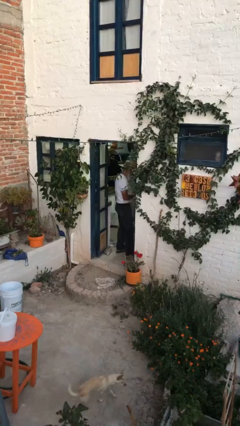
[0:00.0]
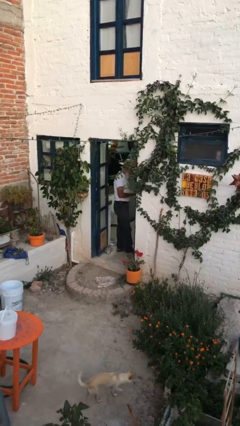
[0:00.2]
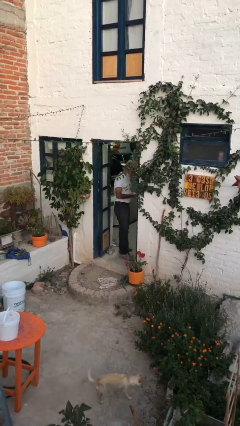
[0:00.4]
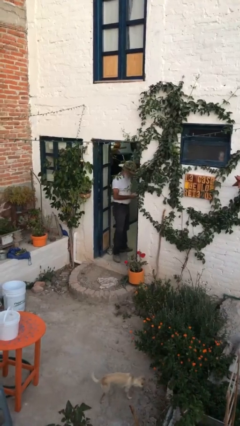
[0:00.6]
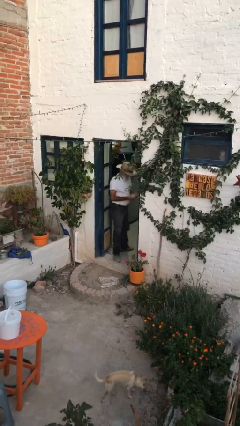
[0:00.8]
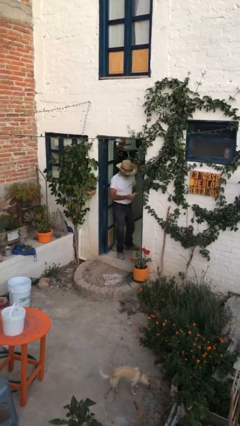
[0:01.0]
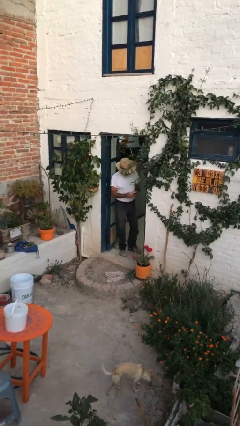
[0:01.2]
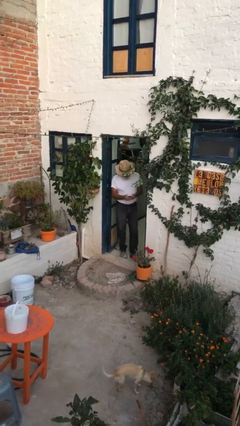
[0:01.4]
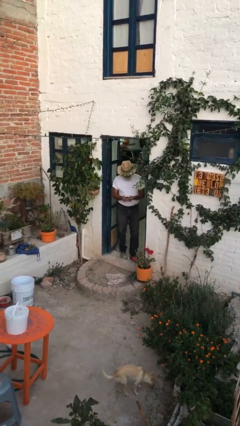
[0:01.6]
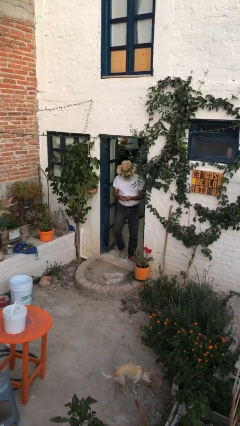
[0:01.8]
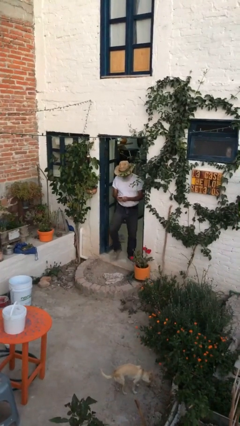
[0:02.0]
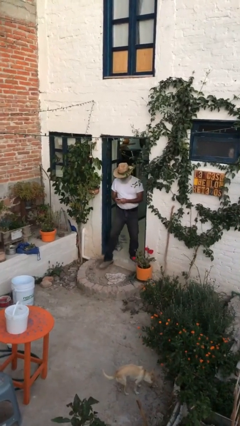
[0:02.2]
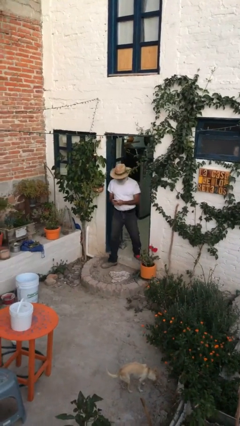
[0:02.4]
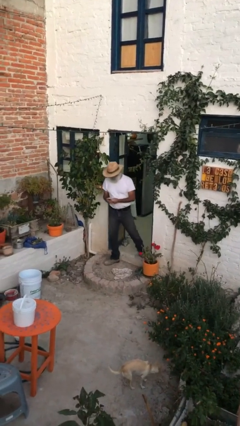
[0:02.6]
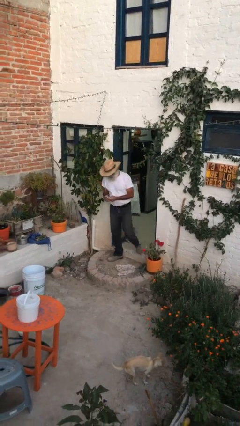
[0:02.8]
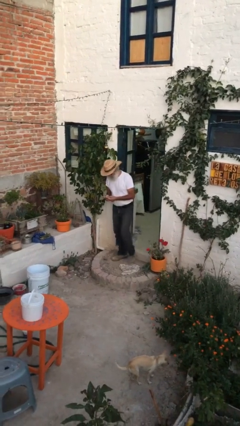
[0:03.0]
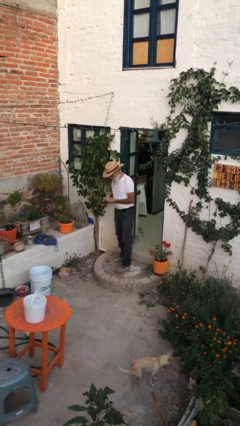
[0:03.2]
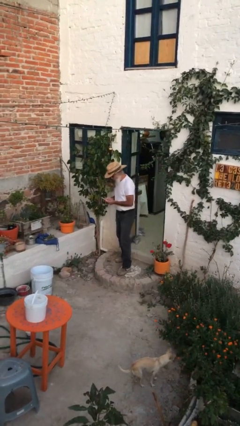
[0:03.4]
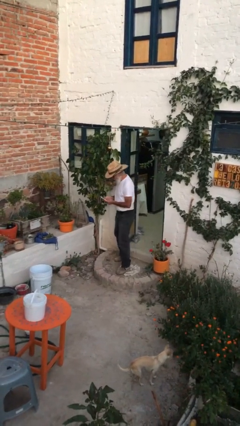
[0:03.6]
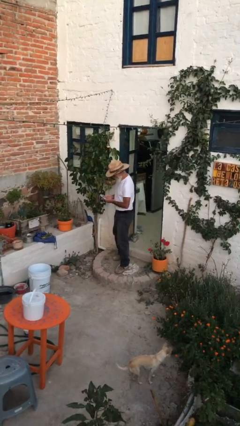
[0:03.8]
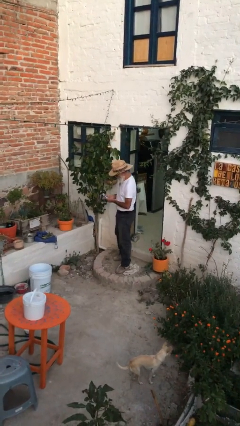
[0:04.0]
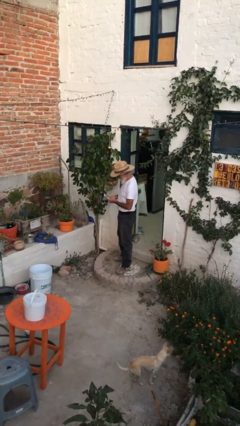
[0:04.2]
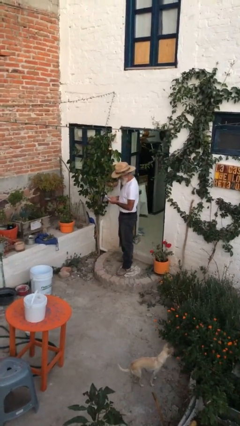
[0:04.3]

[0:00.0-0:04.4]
person enters scene through structure

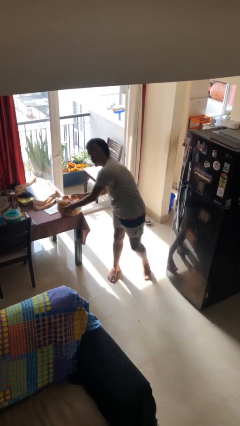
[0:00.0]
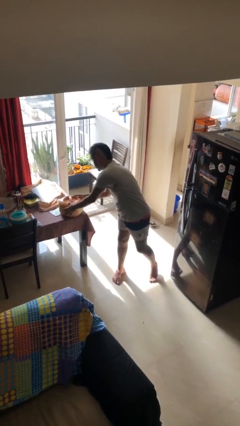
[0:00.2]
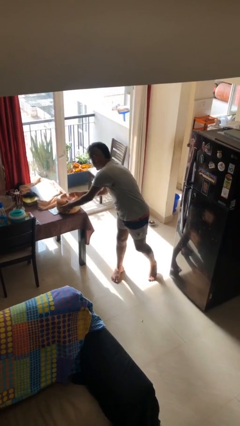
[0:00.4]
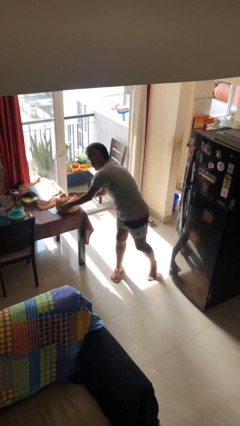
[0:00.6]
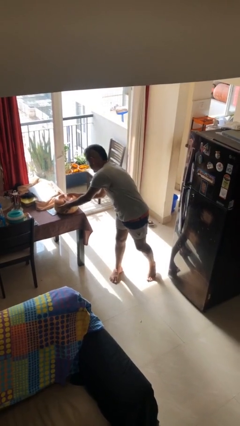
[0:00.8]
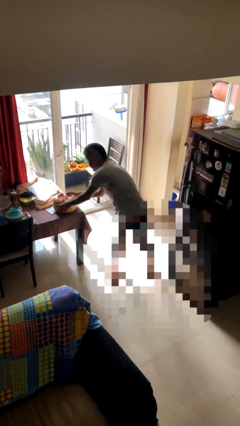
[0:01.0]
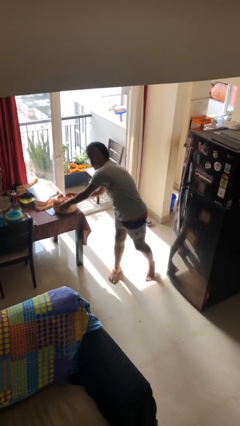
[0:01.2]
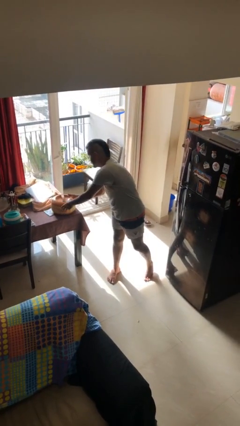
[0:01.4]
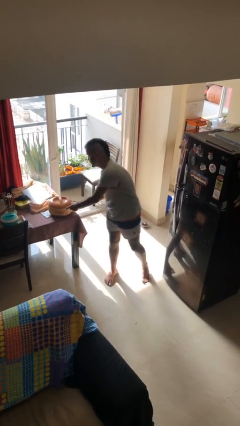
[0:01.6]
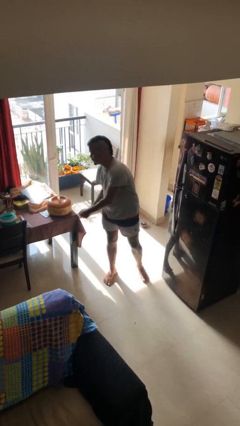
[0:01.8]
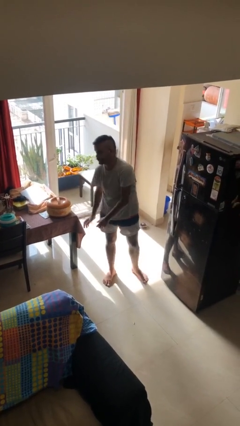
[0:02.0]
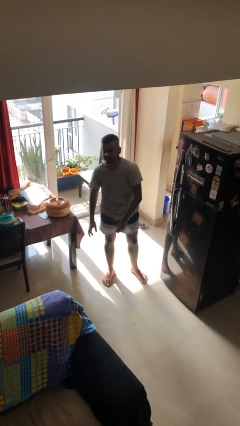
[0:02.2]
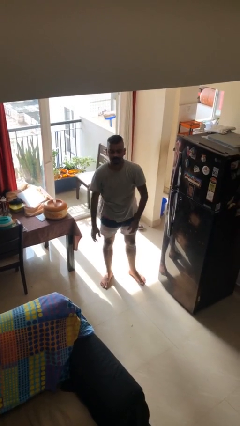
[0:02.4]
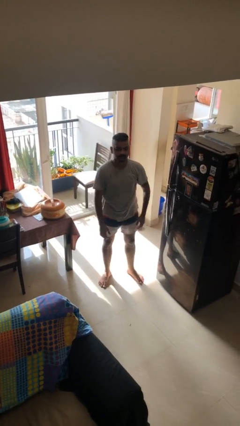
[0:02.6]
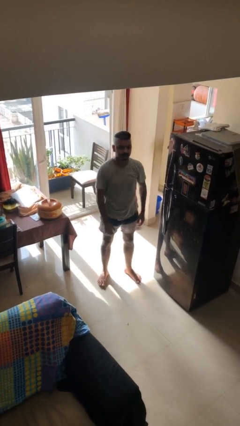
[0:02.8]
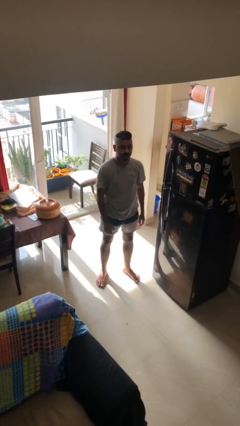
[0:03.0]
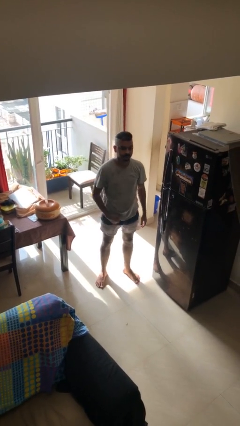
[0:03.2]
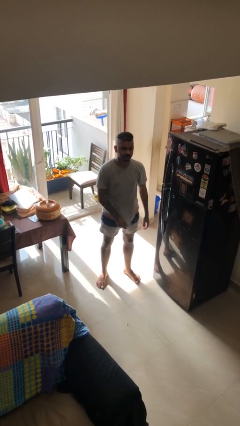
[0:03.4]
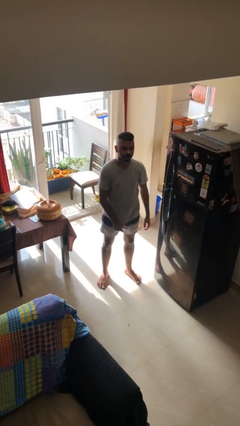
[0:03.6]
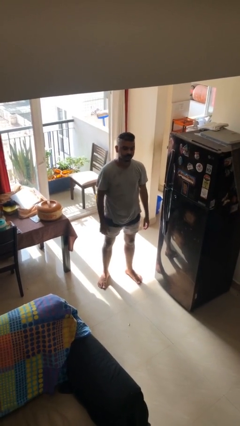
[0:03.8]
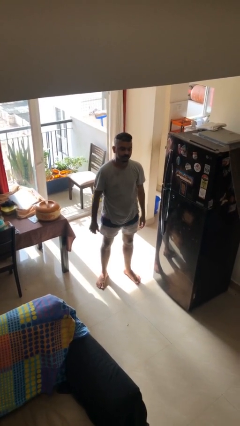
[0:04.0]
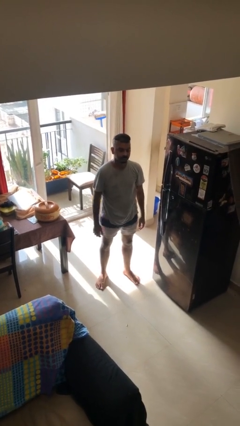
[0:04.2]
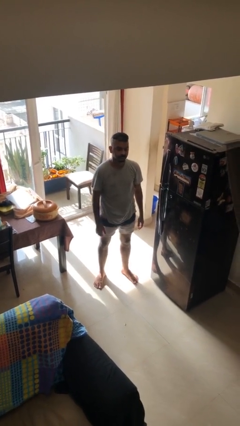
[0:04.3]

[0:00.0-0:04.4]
person puts down object on table

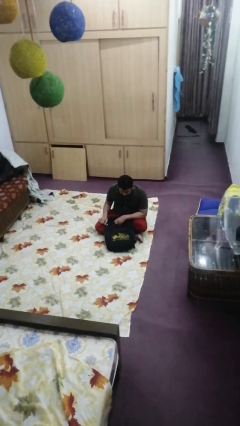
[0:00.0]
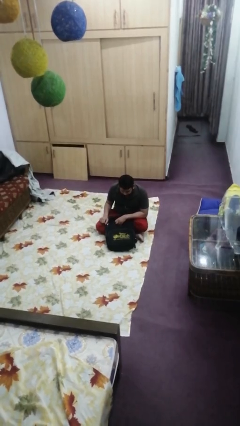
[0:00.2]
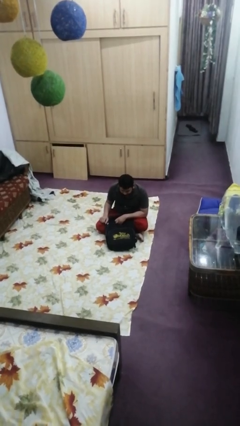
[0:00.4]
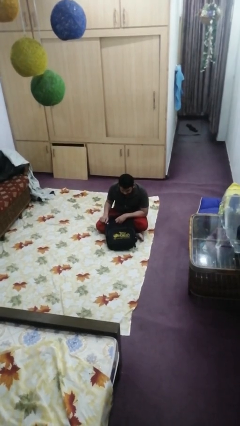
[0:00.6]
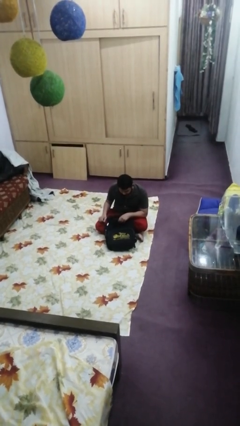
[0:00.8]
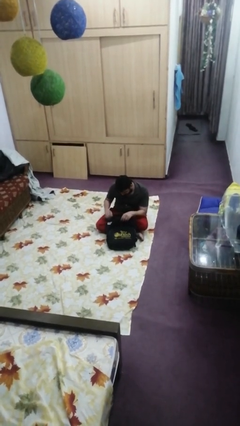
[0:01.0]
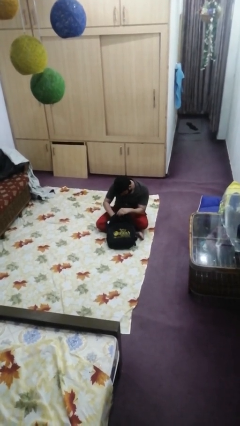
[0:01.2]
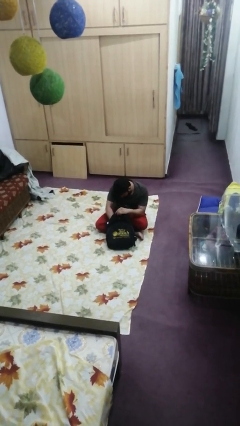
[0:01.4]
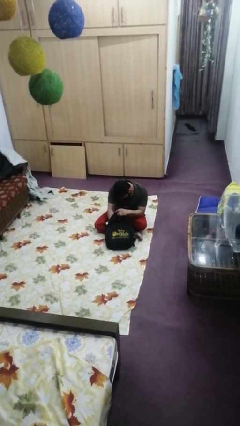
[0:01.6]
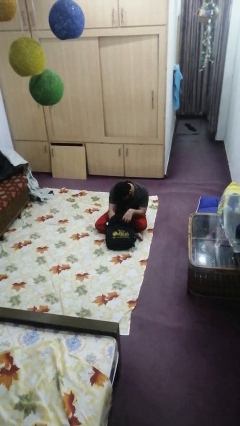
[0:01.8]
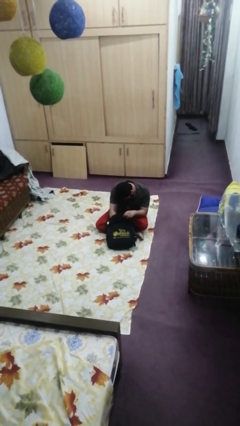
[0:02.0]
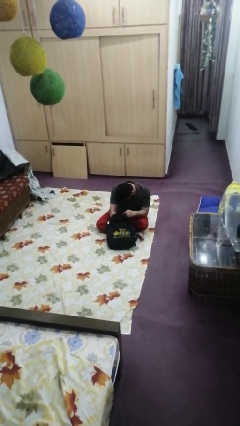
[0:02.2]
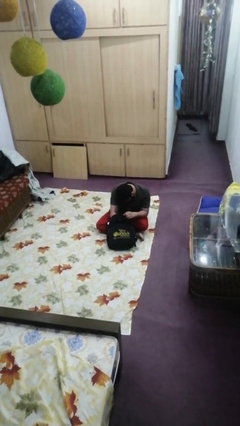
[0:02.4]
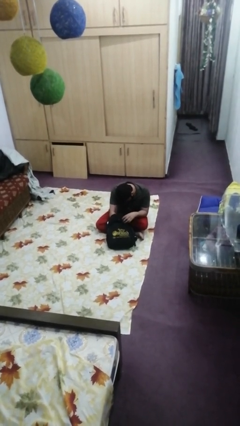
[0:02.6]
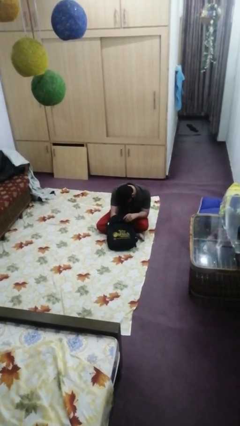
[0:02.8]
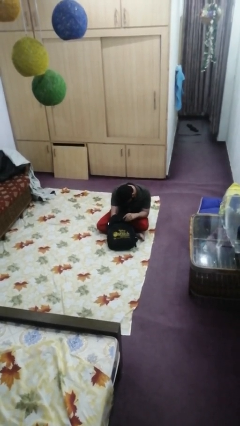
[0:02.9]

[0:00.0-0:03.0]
person searches in backpack

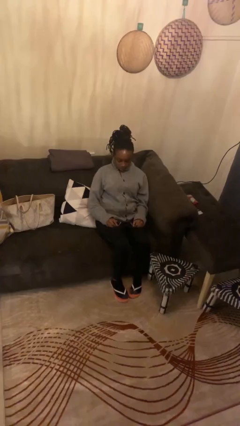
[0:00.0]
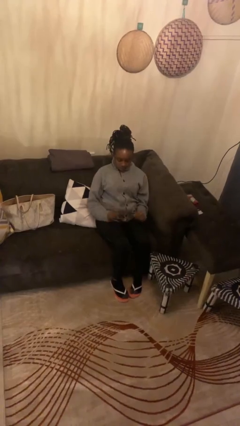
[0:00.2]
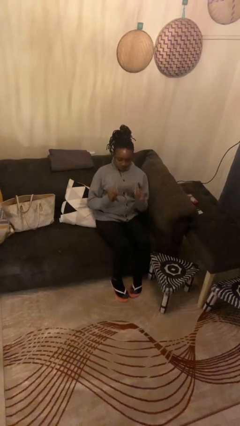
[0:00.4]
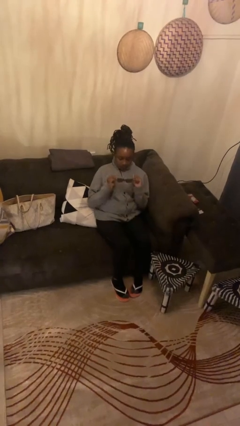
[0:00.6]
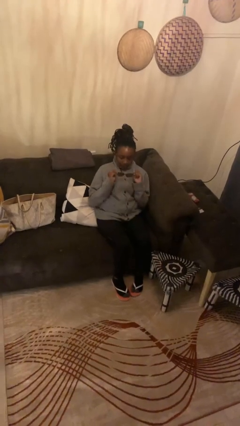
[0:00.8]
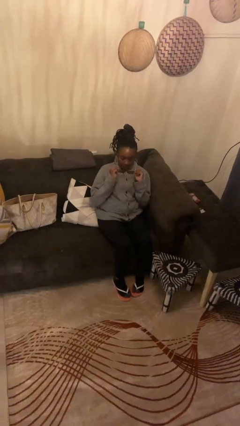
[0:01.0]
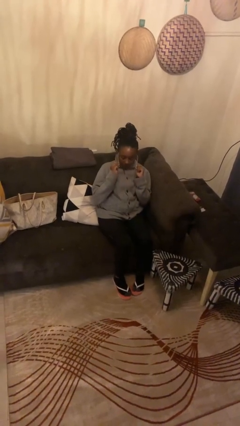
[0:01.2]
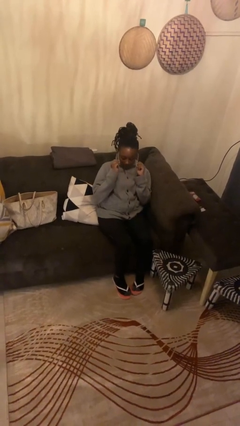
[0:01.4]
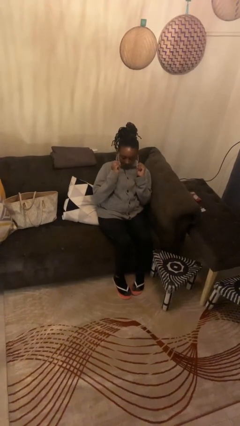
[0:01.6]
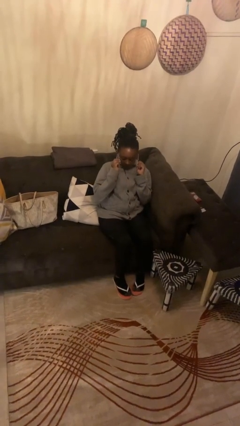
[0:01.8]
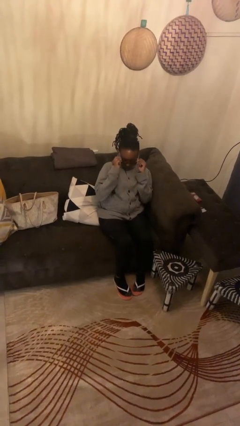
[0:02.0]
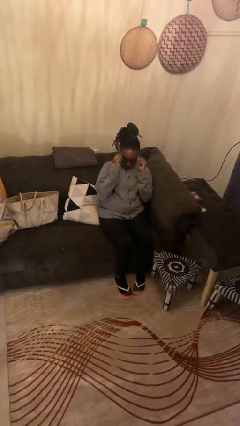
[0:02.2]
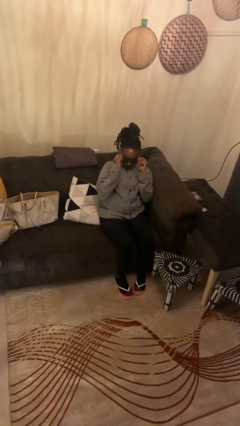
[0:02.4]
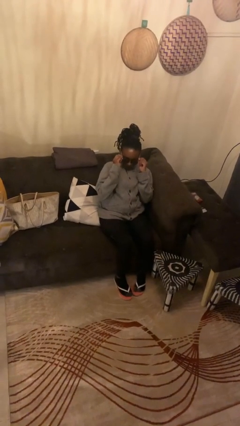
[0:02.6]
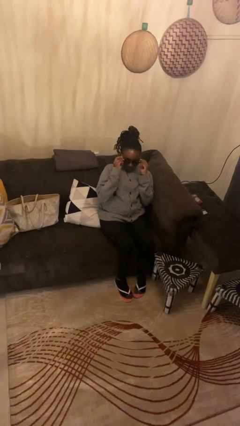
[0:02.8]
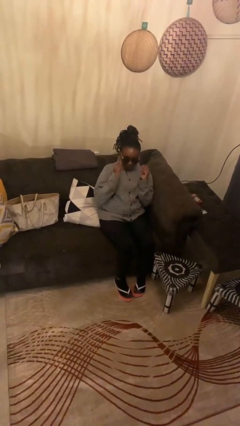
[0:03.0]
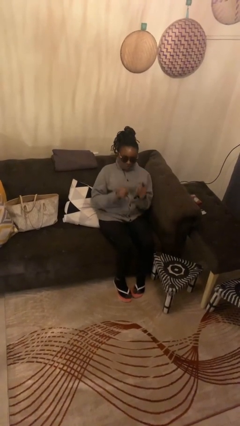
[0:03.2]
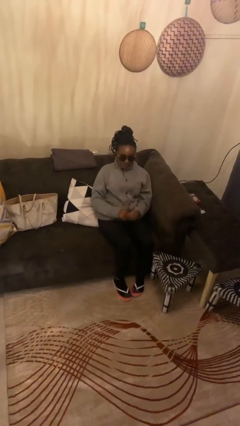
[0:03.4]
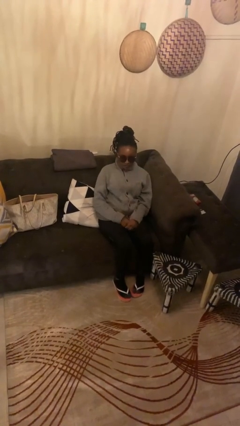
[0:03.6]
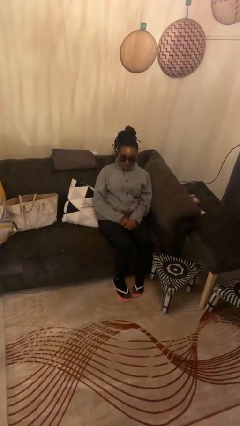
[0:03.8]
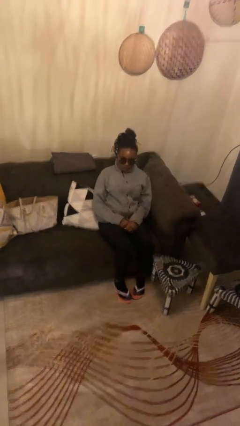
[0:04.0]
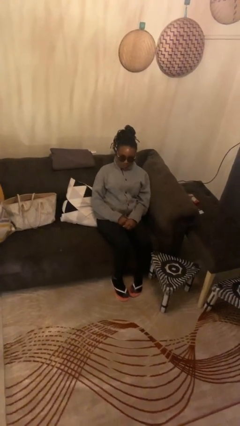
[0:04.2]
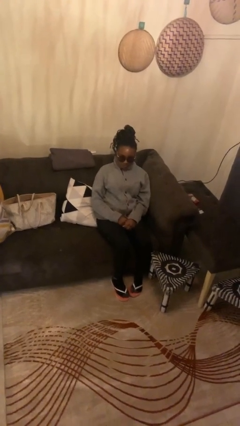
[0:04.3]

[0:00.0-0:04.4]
person puts on sunglasses

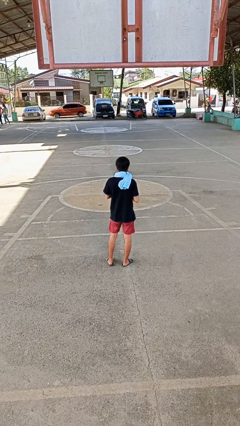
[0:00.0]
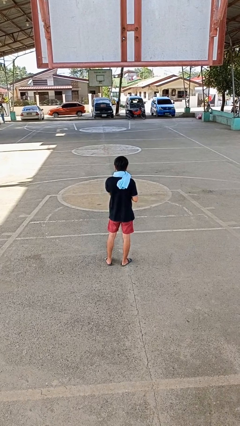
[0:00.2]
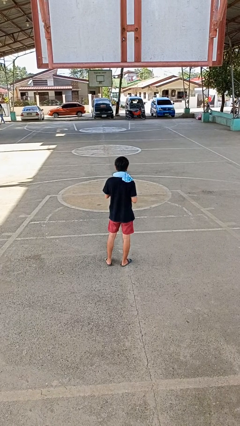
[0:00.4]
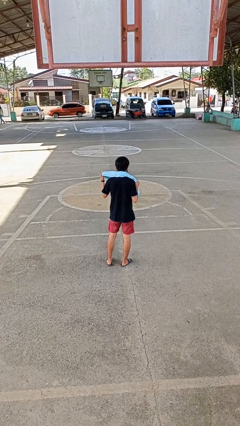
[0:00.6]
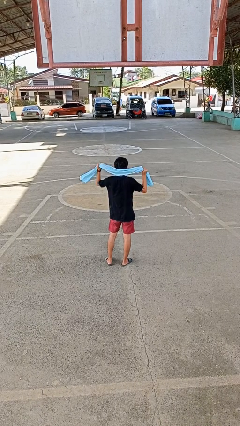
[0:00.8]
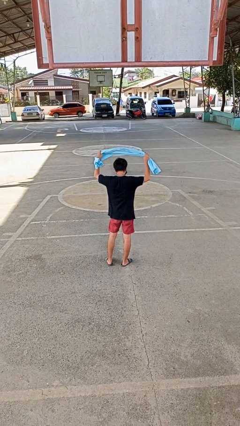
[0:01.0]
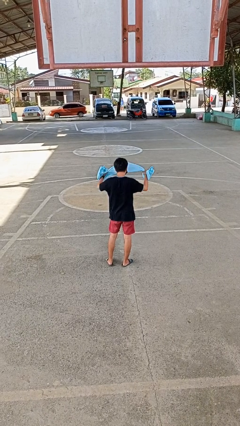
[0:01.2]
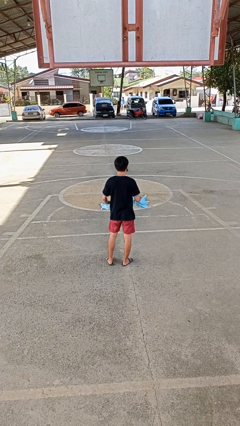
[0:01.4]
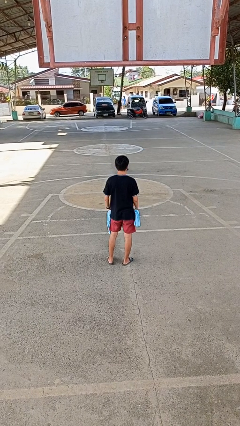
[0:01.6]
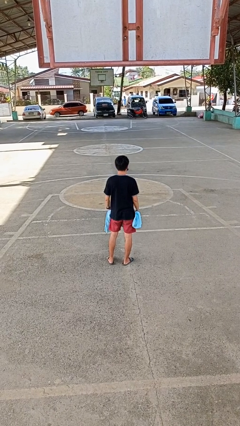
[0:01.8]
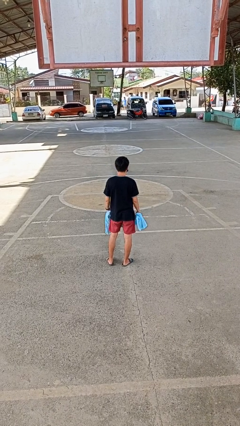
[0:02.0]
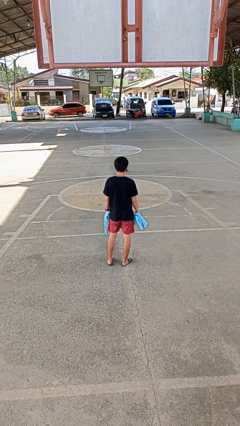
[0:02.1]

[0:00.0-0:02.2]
person takes off scarf
